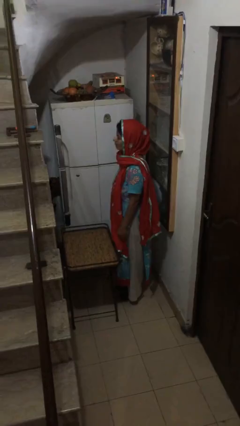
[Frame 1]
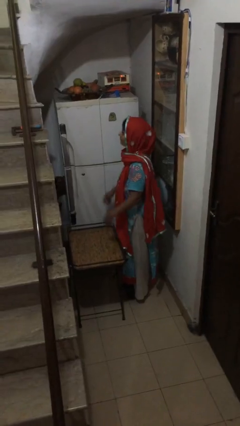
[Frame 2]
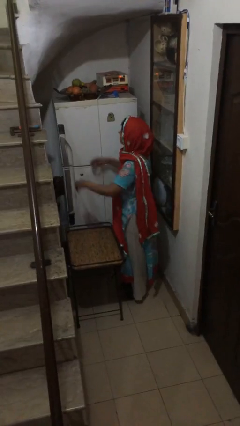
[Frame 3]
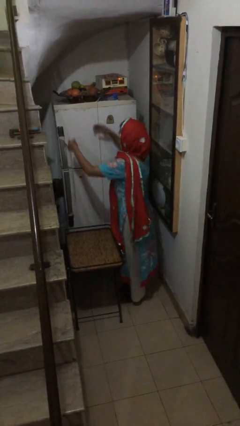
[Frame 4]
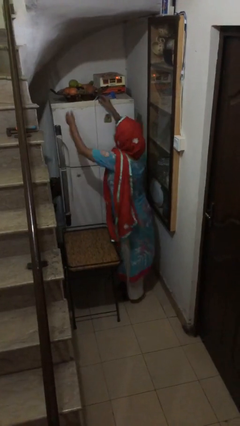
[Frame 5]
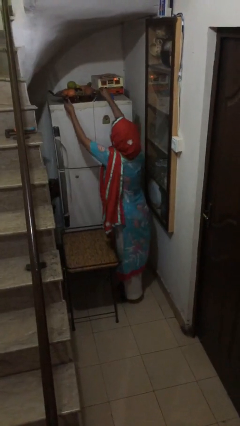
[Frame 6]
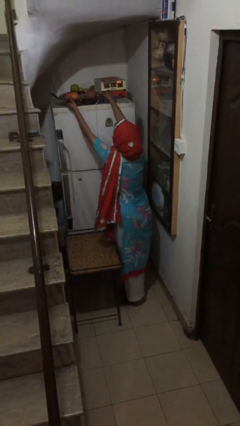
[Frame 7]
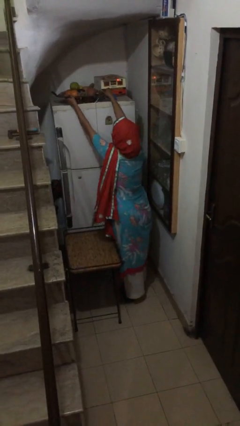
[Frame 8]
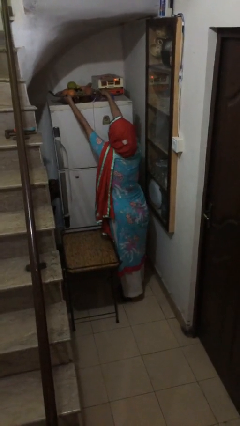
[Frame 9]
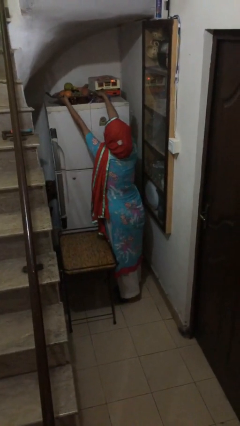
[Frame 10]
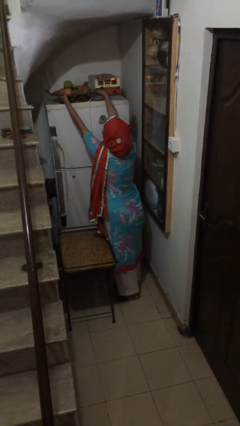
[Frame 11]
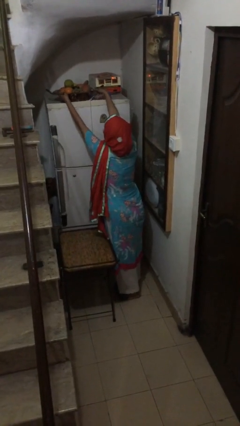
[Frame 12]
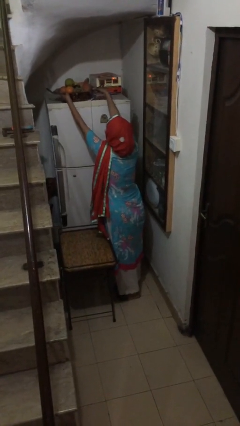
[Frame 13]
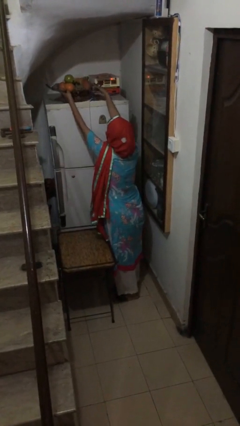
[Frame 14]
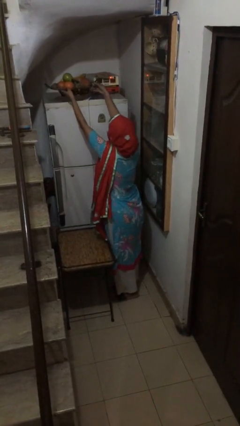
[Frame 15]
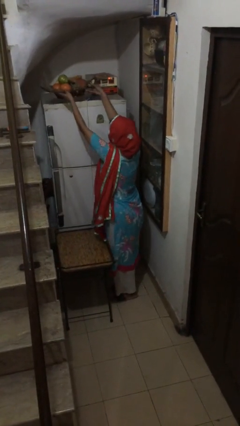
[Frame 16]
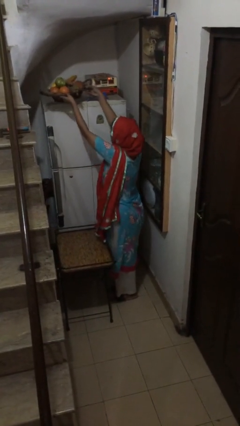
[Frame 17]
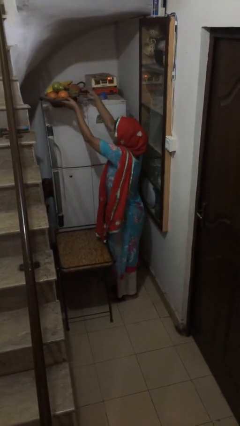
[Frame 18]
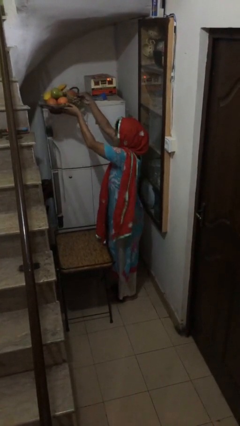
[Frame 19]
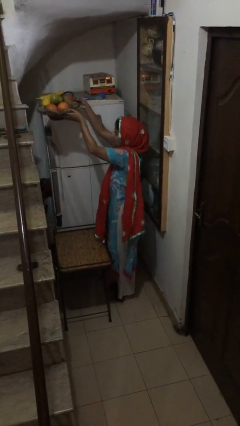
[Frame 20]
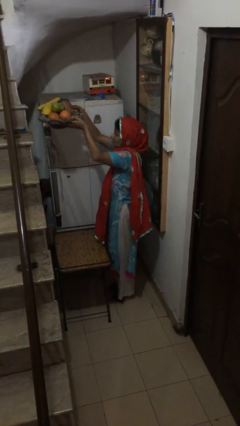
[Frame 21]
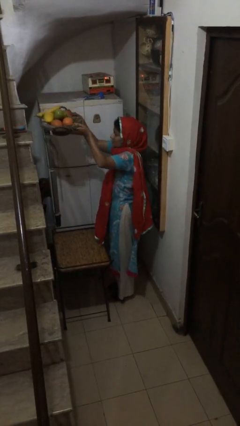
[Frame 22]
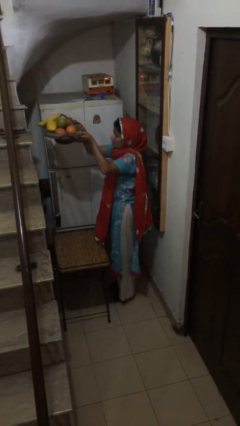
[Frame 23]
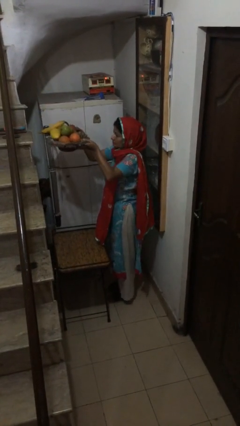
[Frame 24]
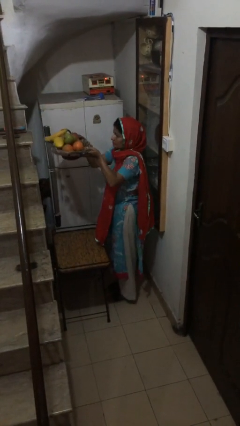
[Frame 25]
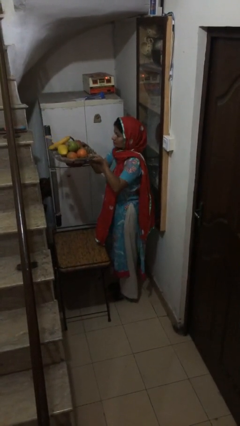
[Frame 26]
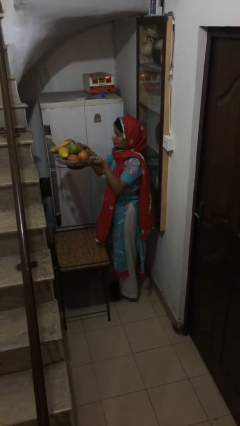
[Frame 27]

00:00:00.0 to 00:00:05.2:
person picks up object from shelf

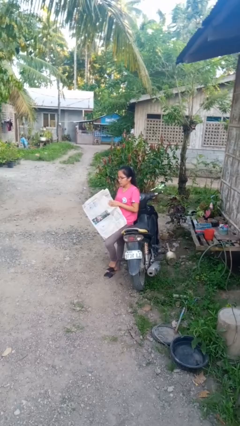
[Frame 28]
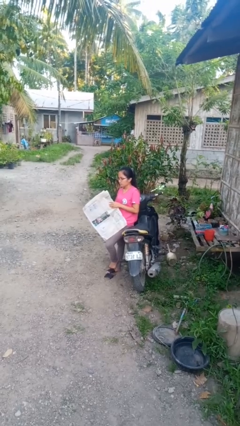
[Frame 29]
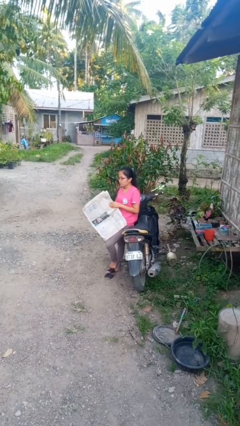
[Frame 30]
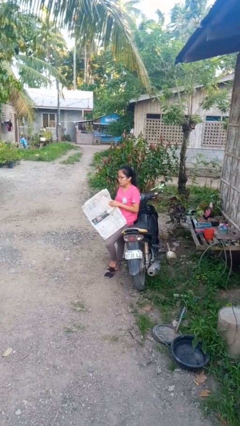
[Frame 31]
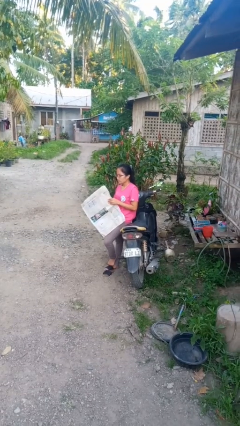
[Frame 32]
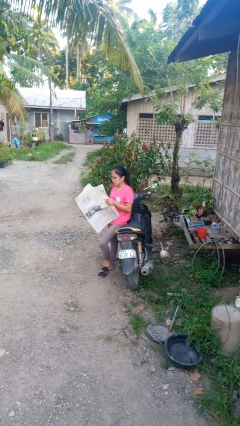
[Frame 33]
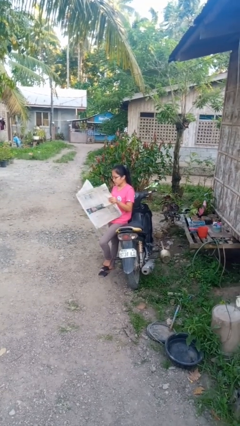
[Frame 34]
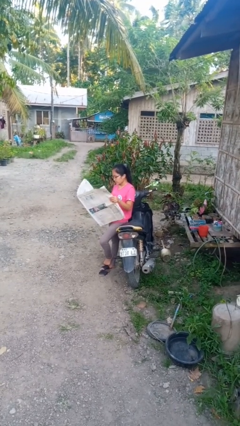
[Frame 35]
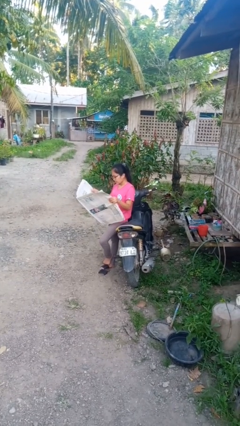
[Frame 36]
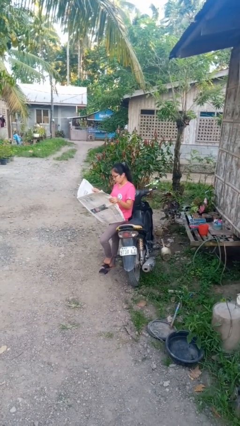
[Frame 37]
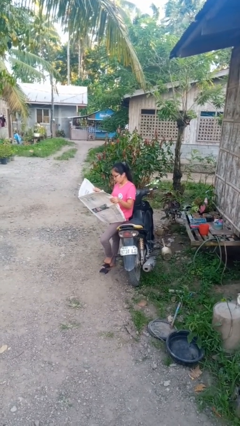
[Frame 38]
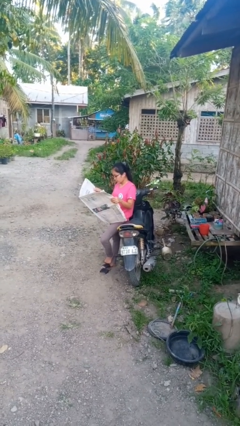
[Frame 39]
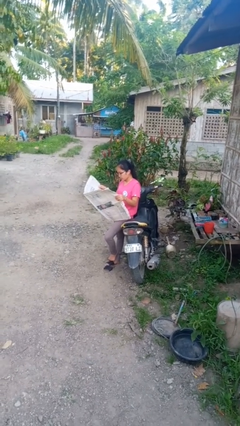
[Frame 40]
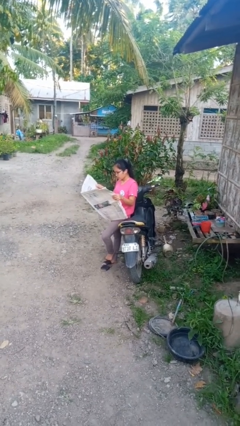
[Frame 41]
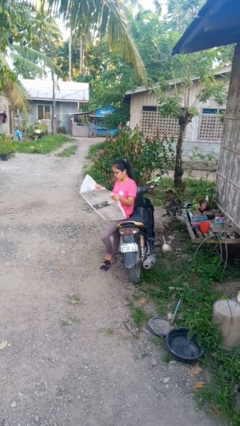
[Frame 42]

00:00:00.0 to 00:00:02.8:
person reads newspaper

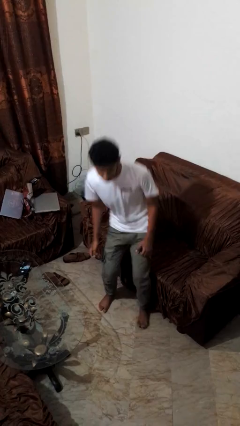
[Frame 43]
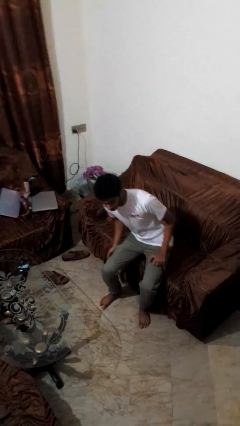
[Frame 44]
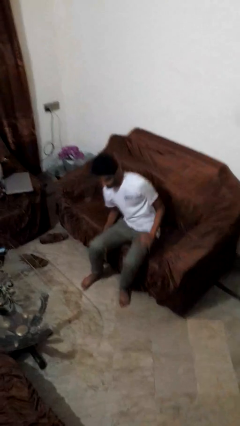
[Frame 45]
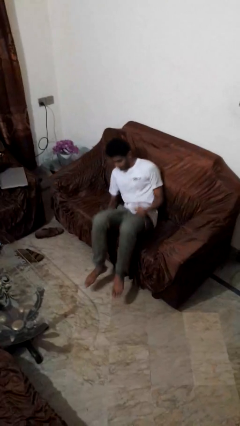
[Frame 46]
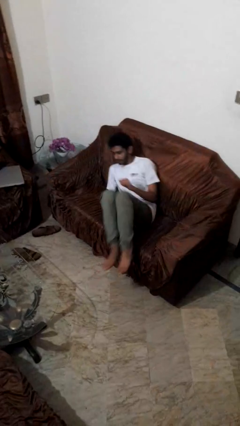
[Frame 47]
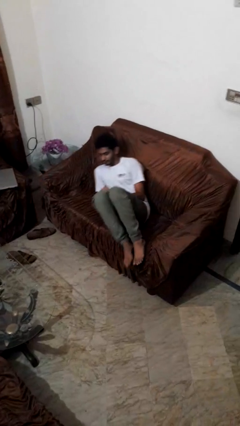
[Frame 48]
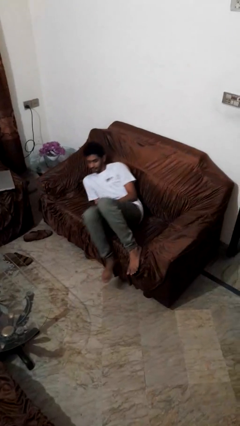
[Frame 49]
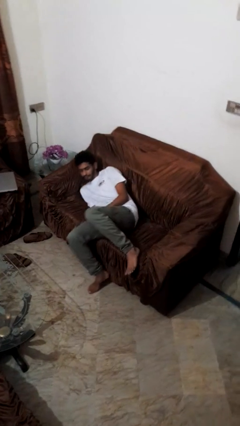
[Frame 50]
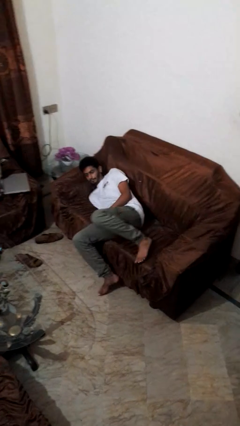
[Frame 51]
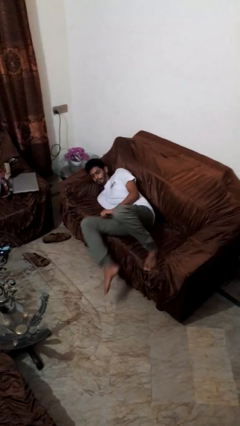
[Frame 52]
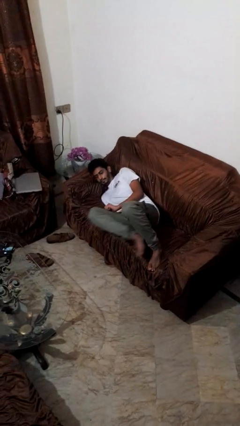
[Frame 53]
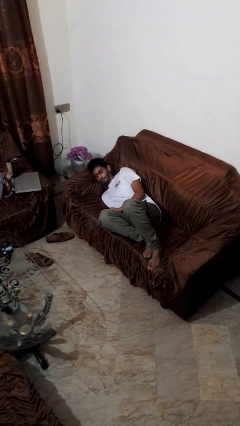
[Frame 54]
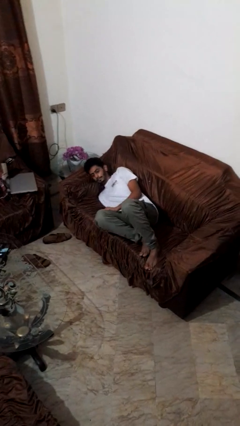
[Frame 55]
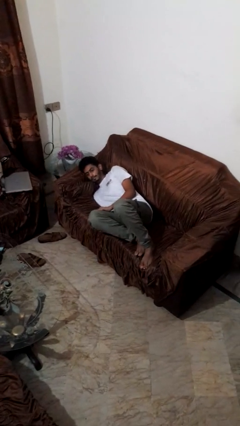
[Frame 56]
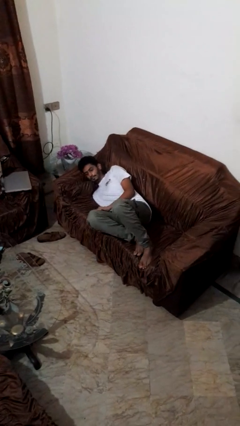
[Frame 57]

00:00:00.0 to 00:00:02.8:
person lies down on couch

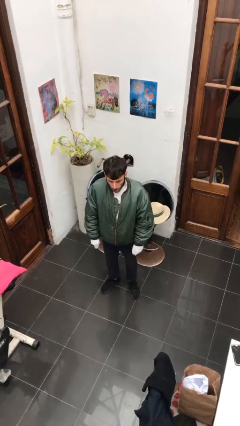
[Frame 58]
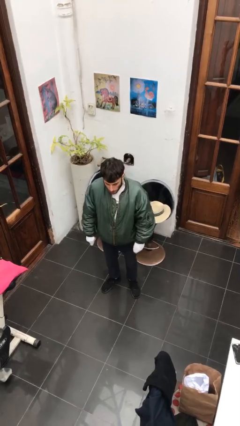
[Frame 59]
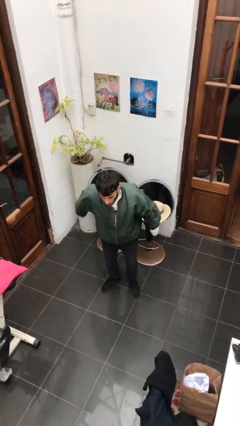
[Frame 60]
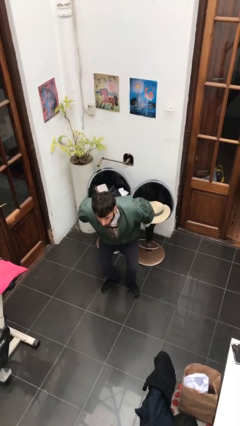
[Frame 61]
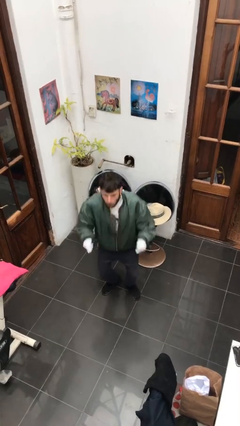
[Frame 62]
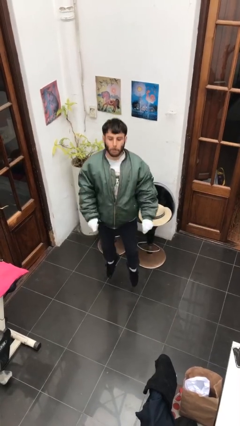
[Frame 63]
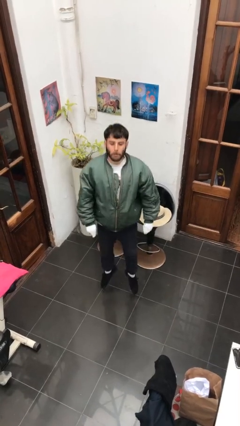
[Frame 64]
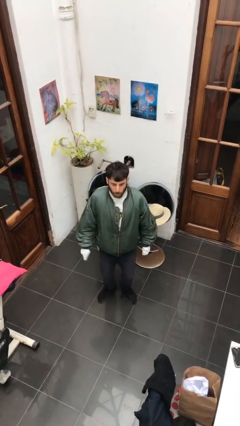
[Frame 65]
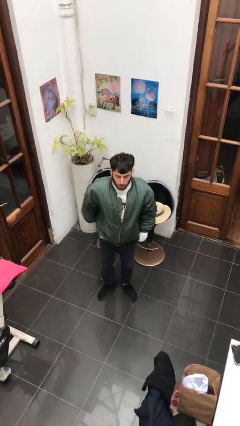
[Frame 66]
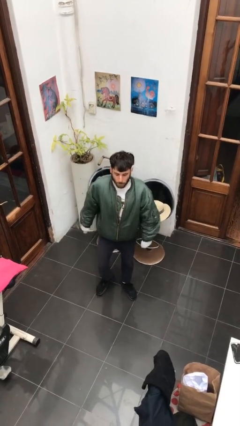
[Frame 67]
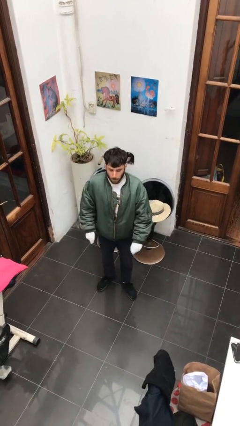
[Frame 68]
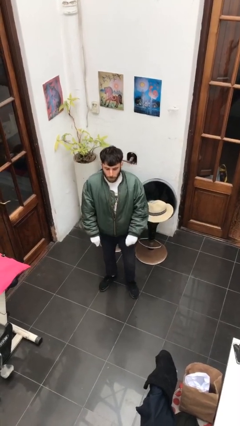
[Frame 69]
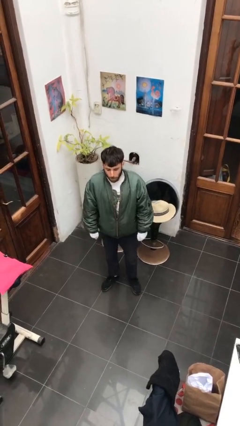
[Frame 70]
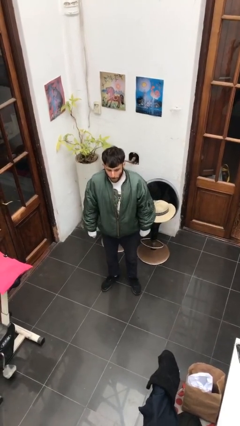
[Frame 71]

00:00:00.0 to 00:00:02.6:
person jumps

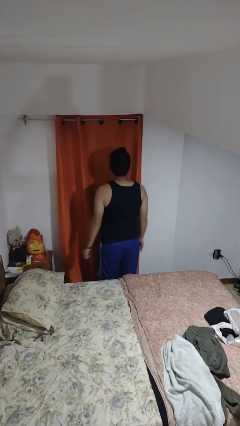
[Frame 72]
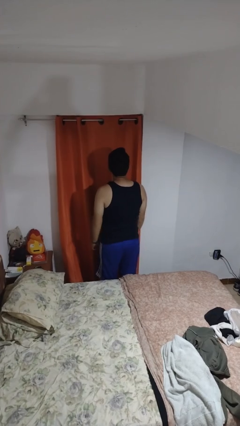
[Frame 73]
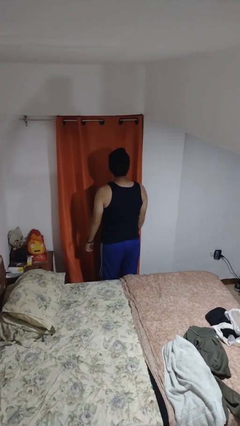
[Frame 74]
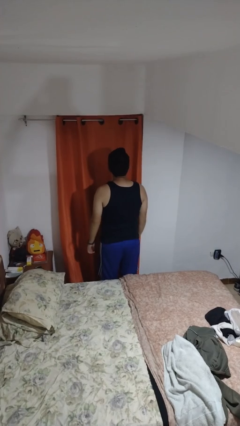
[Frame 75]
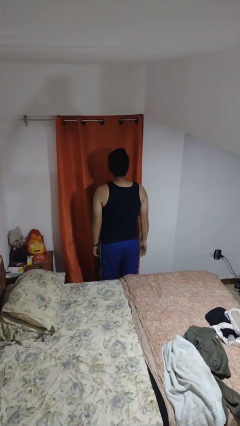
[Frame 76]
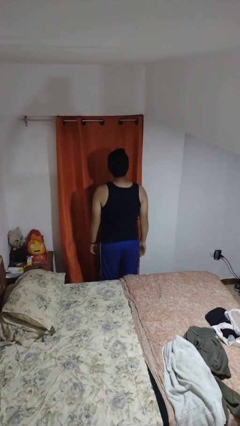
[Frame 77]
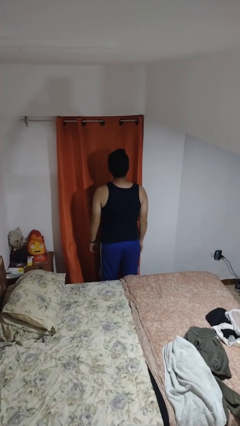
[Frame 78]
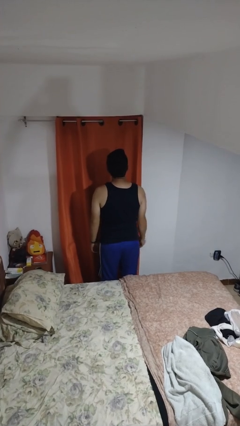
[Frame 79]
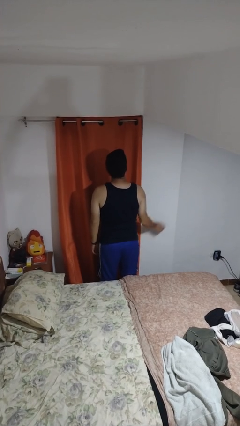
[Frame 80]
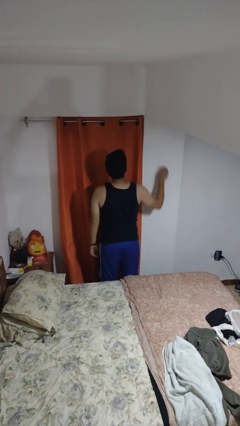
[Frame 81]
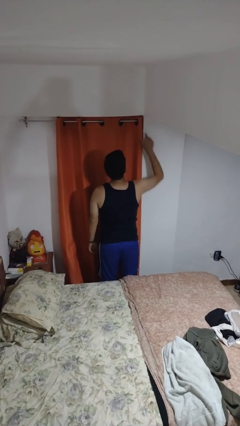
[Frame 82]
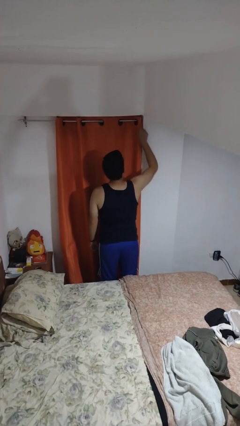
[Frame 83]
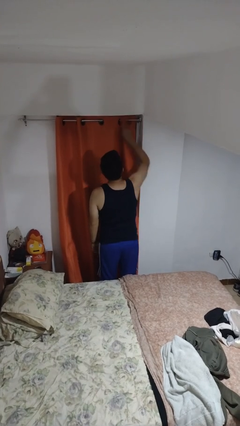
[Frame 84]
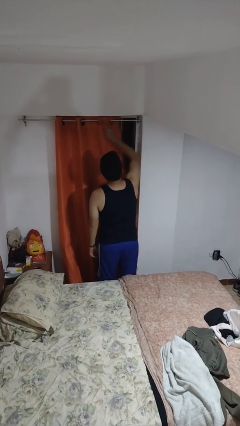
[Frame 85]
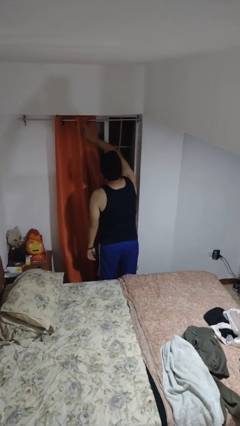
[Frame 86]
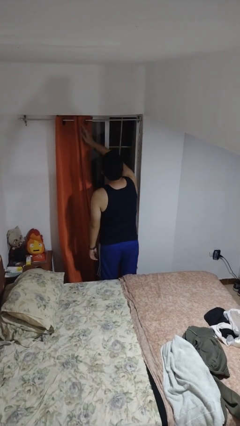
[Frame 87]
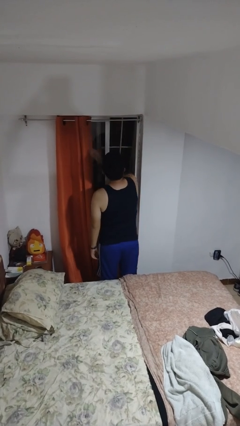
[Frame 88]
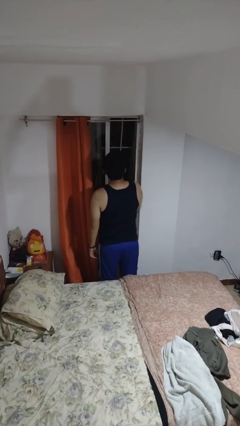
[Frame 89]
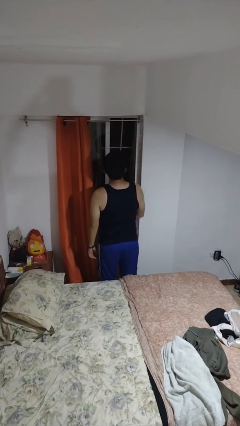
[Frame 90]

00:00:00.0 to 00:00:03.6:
person opens curtains

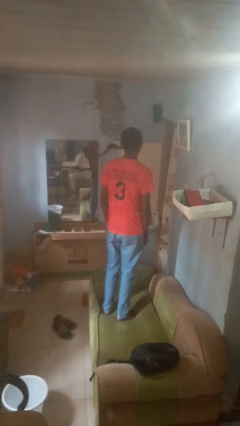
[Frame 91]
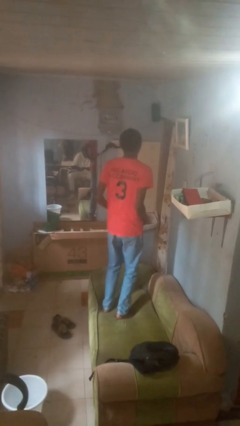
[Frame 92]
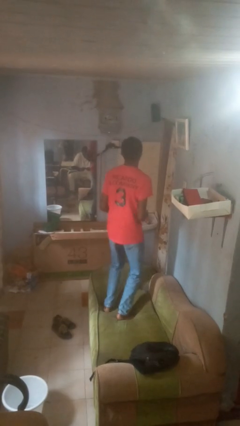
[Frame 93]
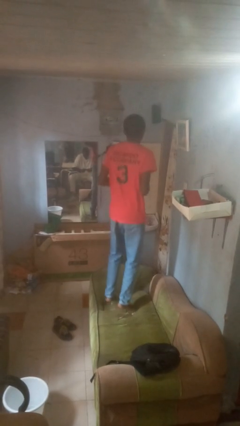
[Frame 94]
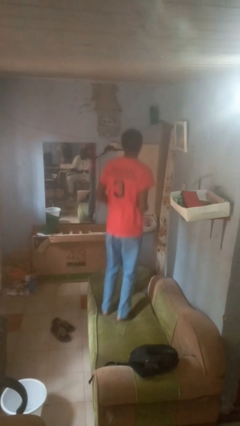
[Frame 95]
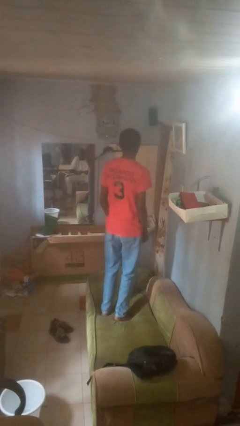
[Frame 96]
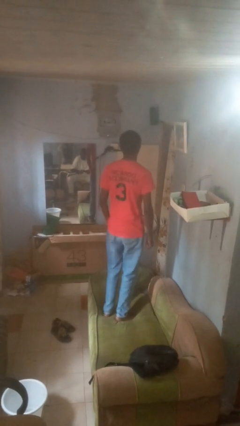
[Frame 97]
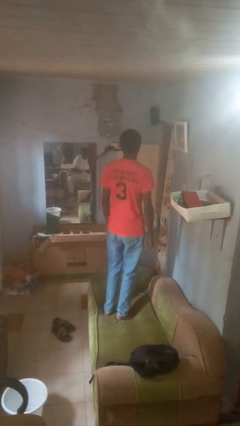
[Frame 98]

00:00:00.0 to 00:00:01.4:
person jumps on couch
